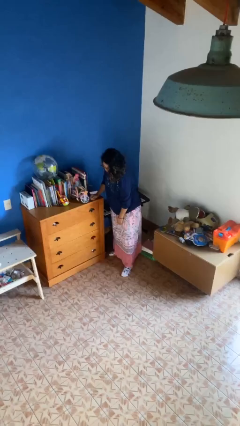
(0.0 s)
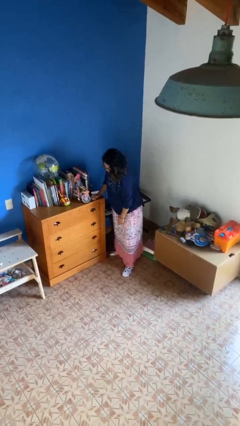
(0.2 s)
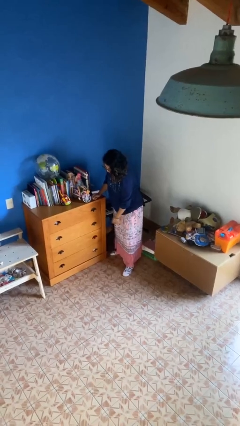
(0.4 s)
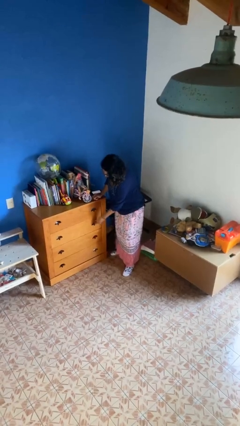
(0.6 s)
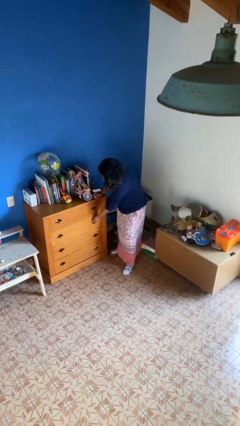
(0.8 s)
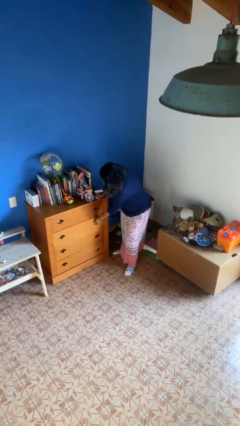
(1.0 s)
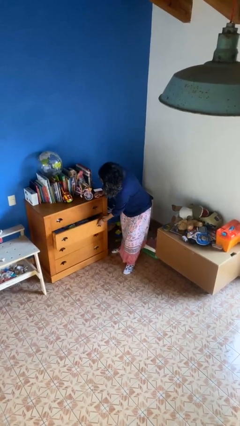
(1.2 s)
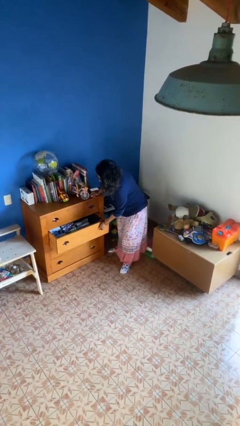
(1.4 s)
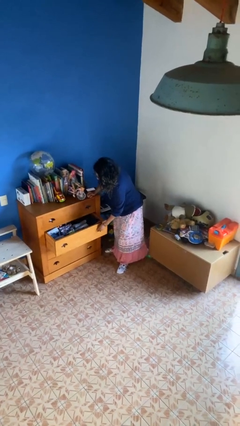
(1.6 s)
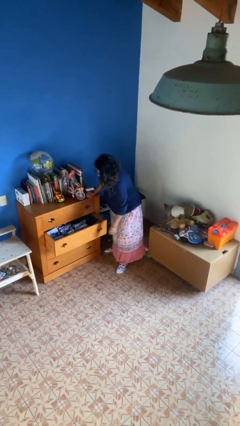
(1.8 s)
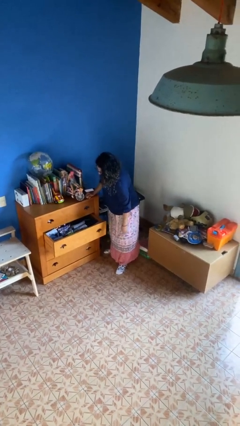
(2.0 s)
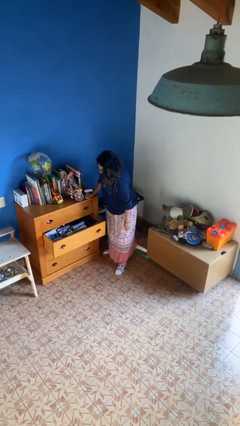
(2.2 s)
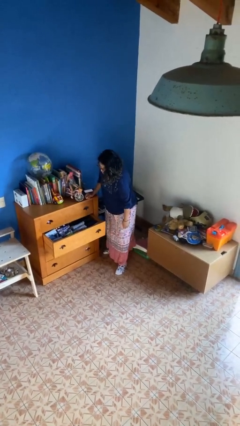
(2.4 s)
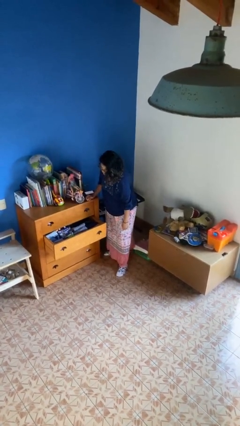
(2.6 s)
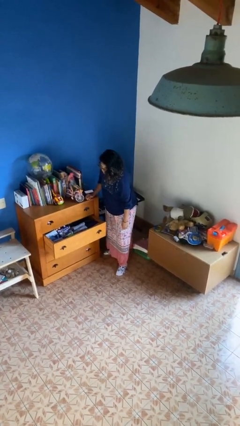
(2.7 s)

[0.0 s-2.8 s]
person opens dresser drawer

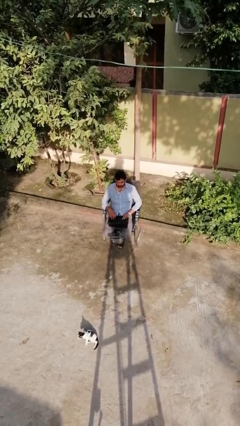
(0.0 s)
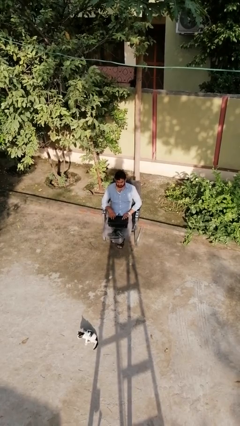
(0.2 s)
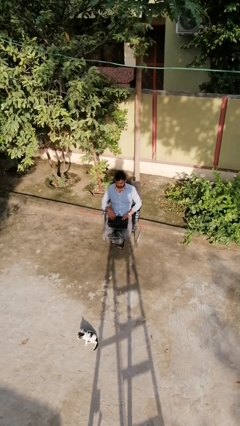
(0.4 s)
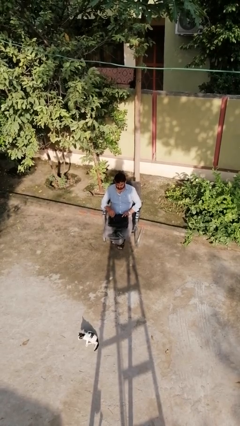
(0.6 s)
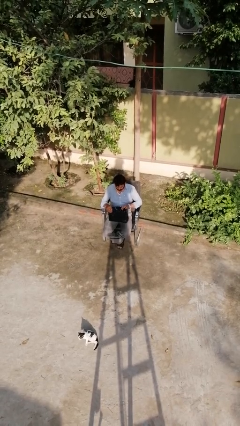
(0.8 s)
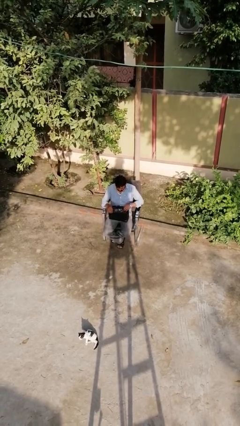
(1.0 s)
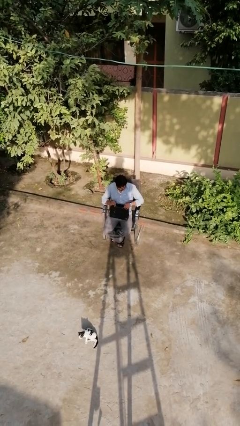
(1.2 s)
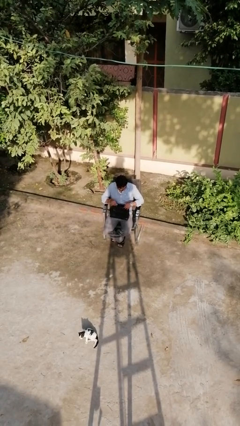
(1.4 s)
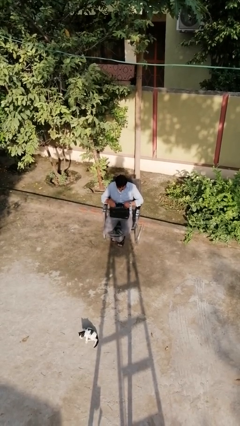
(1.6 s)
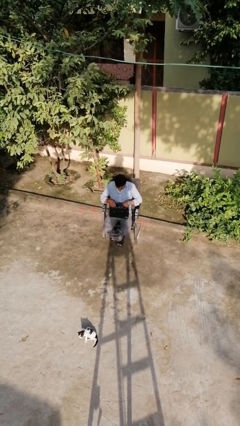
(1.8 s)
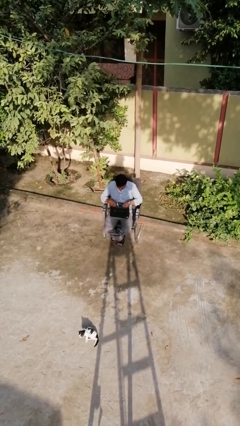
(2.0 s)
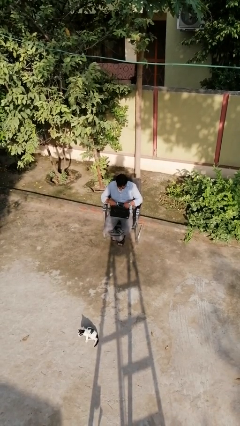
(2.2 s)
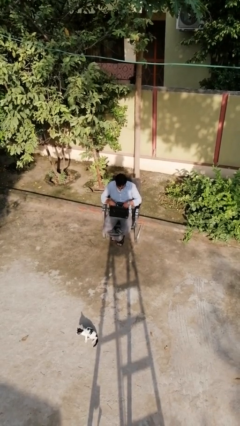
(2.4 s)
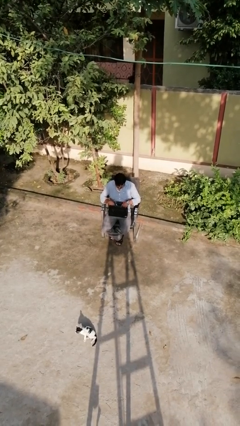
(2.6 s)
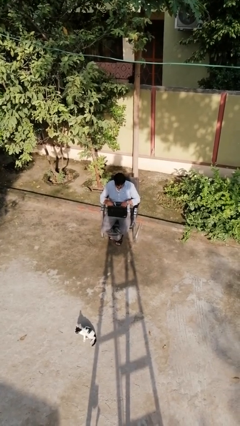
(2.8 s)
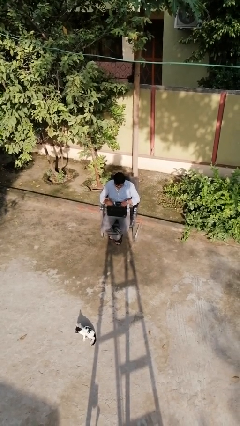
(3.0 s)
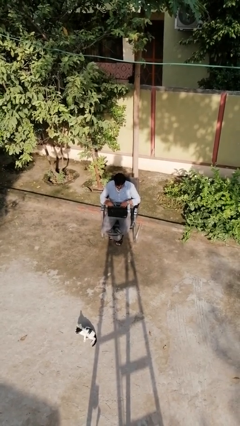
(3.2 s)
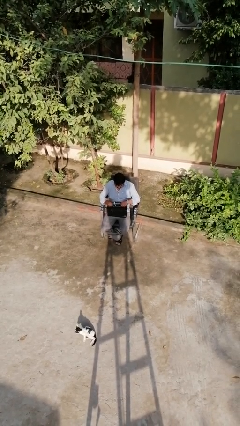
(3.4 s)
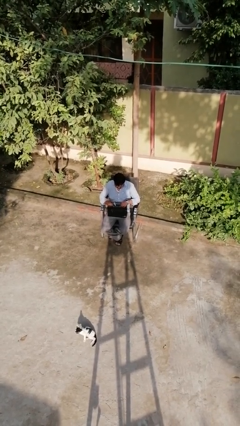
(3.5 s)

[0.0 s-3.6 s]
person searches in backpack

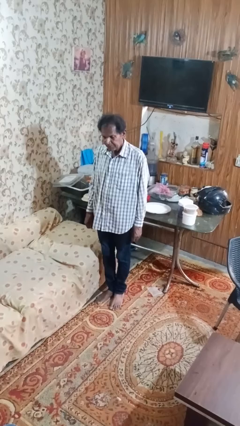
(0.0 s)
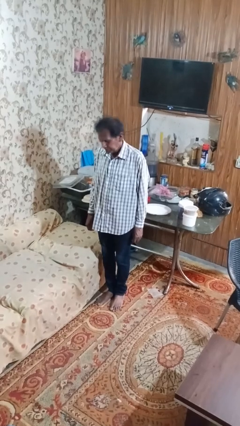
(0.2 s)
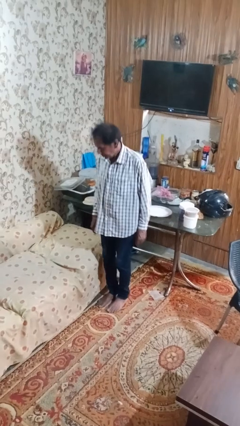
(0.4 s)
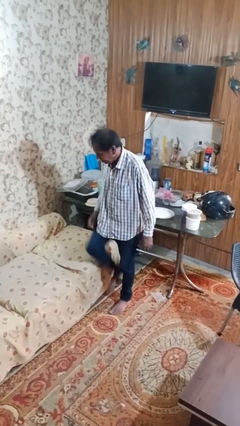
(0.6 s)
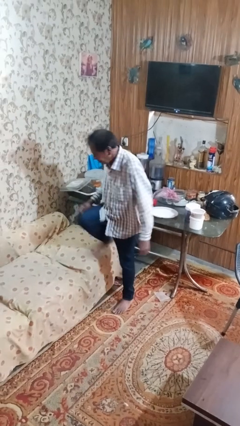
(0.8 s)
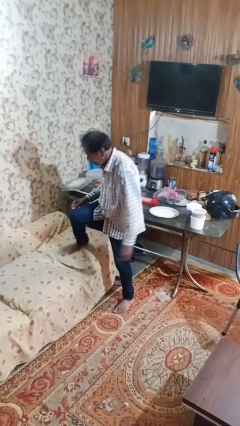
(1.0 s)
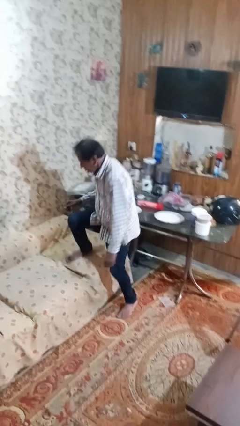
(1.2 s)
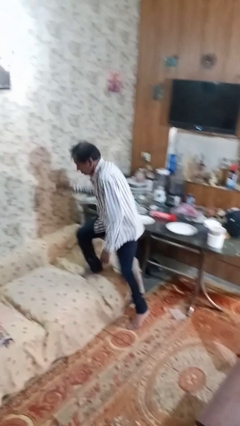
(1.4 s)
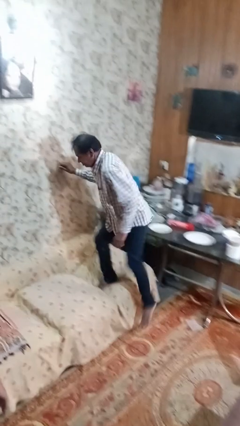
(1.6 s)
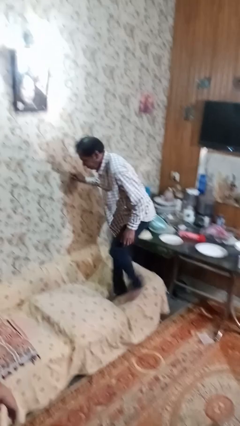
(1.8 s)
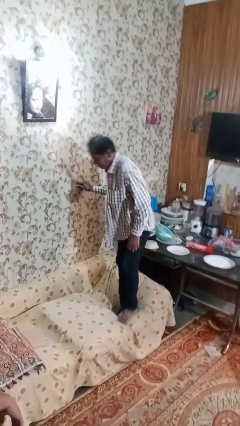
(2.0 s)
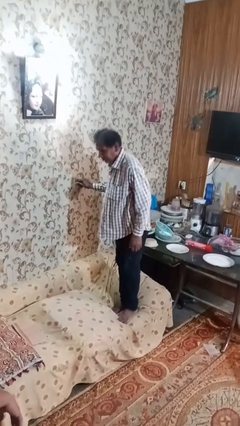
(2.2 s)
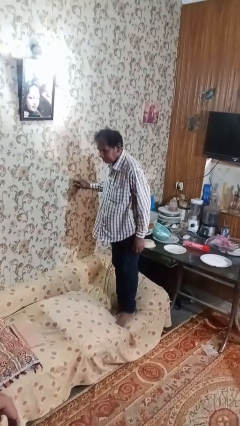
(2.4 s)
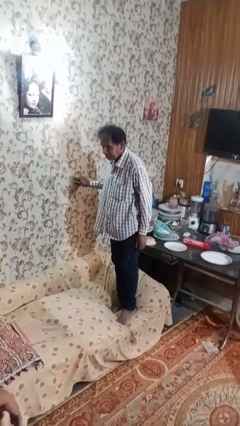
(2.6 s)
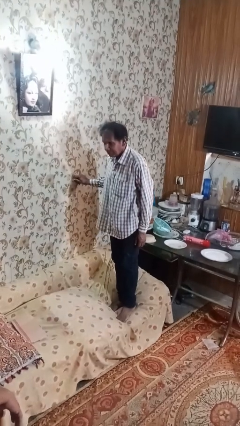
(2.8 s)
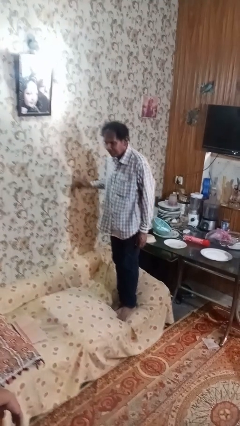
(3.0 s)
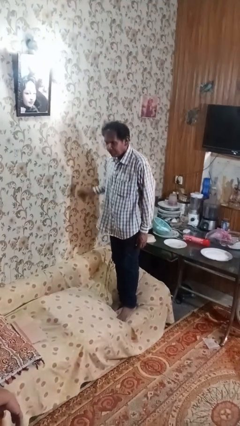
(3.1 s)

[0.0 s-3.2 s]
person climbs on couch

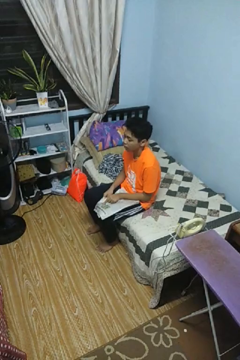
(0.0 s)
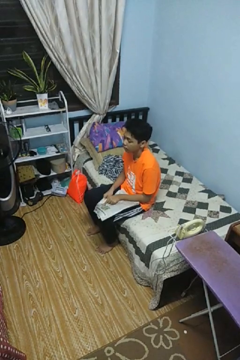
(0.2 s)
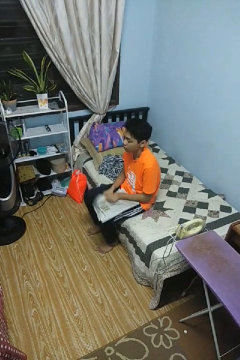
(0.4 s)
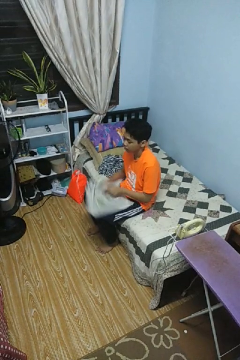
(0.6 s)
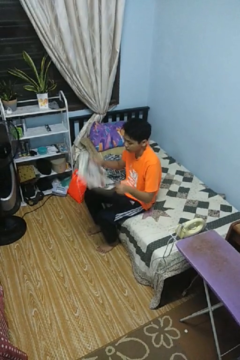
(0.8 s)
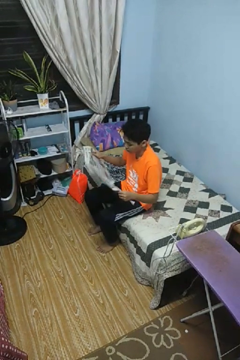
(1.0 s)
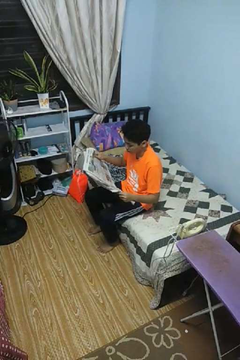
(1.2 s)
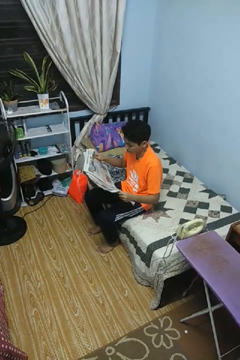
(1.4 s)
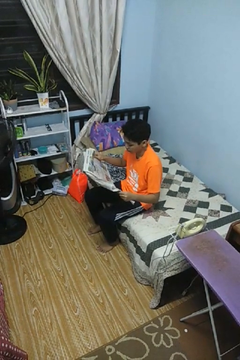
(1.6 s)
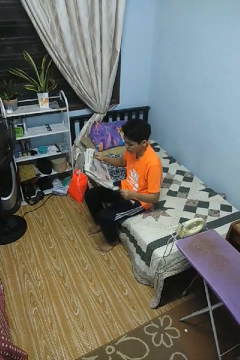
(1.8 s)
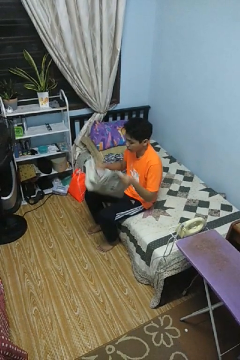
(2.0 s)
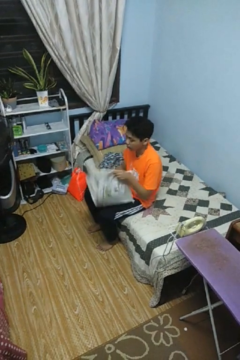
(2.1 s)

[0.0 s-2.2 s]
person reads newspaper

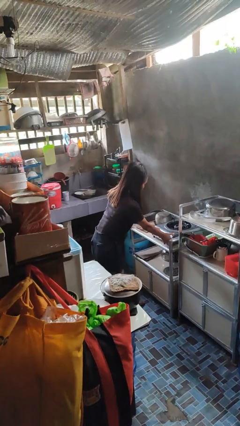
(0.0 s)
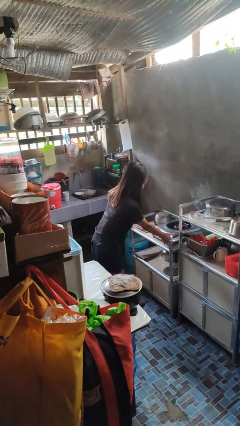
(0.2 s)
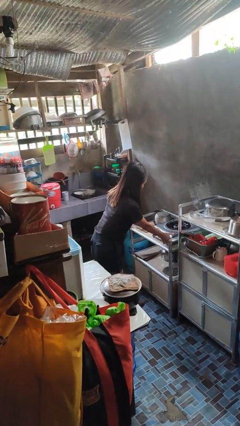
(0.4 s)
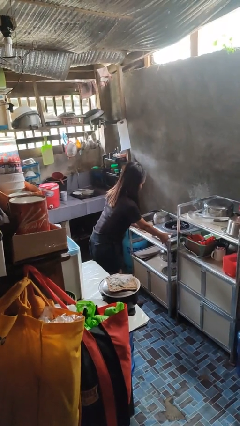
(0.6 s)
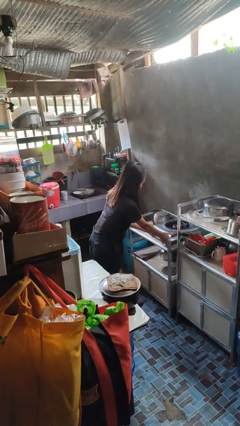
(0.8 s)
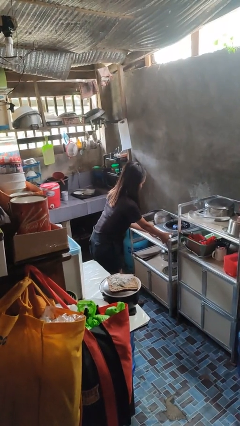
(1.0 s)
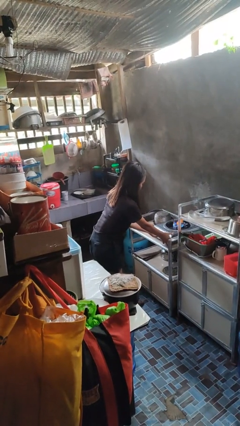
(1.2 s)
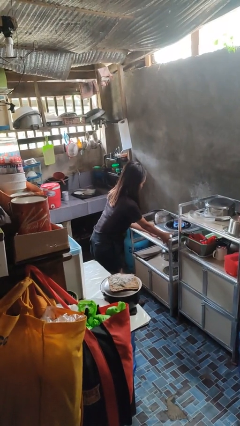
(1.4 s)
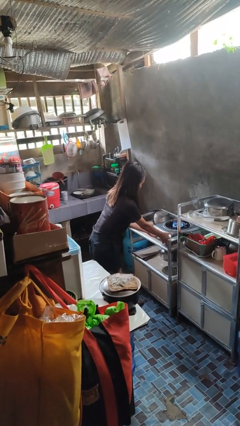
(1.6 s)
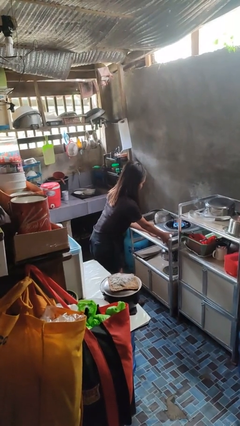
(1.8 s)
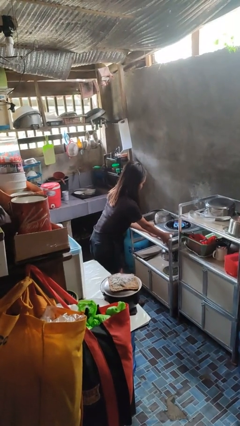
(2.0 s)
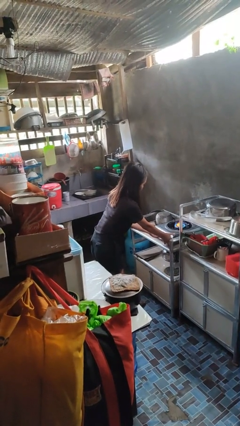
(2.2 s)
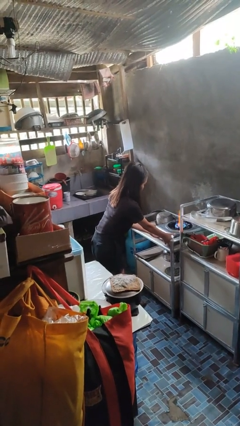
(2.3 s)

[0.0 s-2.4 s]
person turns on stovetop

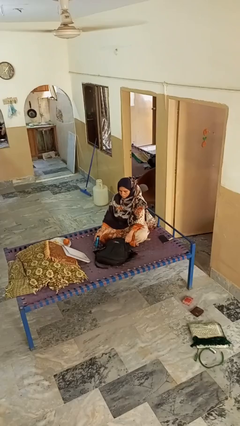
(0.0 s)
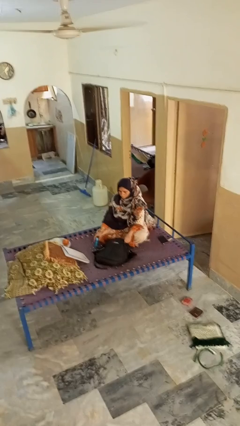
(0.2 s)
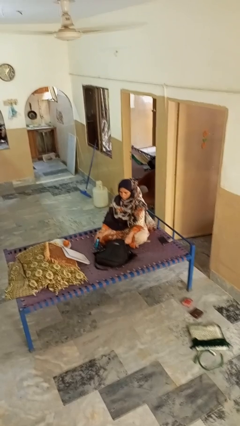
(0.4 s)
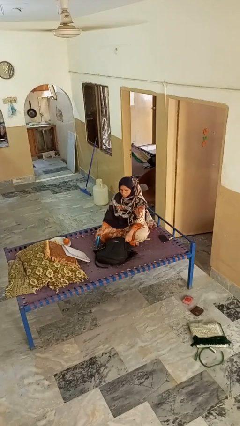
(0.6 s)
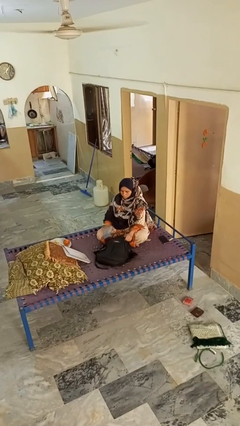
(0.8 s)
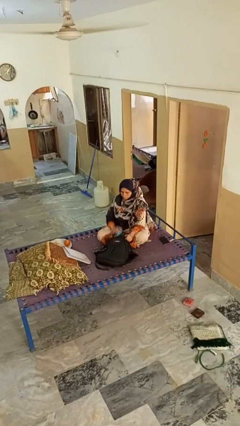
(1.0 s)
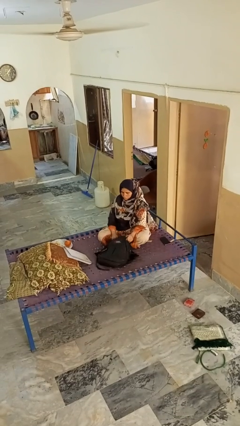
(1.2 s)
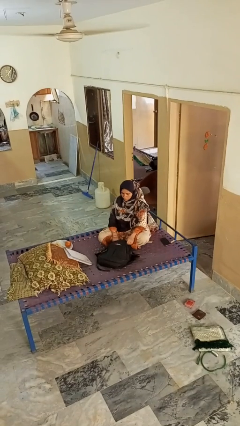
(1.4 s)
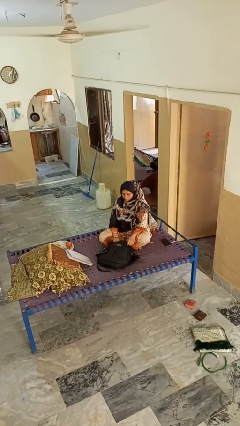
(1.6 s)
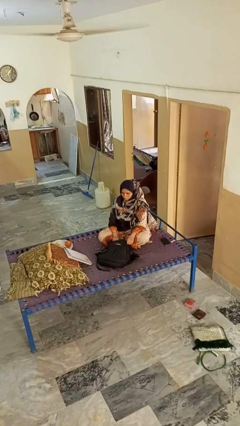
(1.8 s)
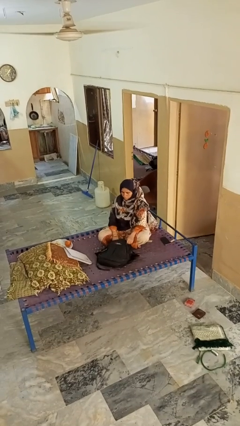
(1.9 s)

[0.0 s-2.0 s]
person puts object into bag

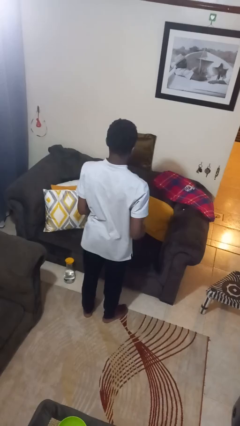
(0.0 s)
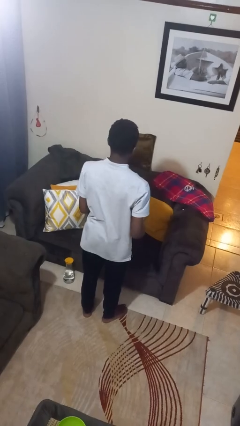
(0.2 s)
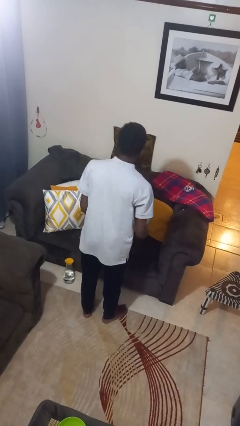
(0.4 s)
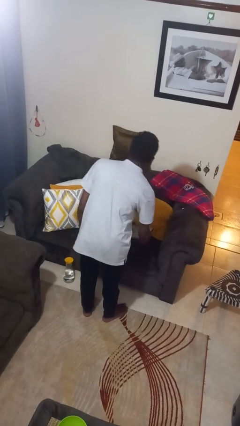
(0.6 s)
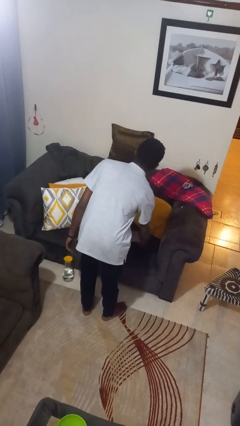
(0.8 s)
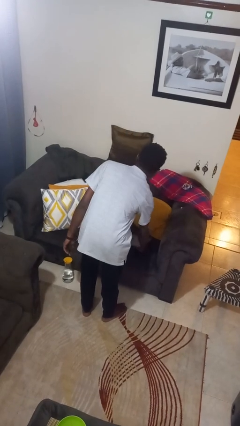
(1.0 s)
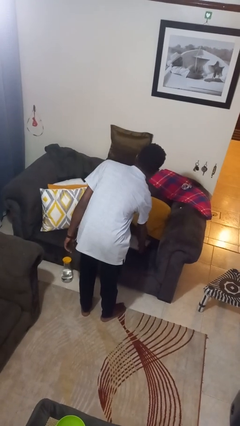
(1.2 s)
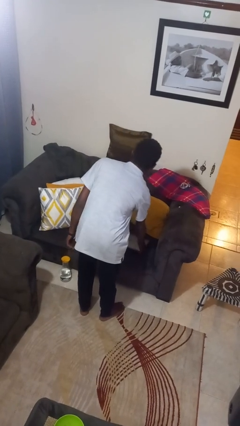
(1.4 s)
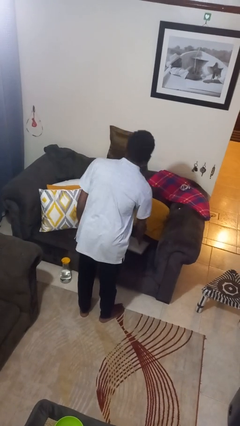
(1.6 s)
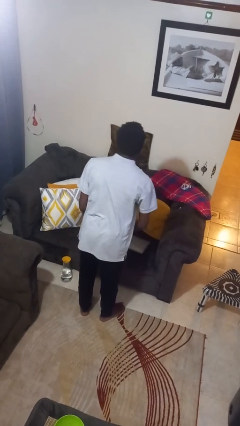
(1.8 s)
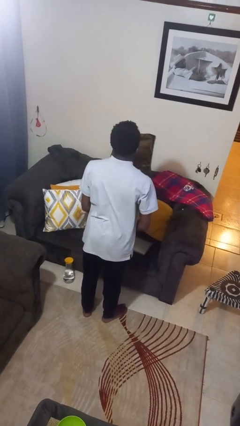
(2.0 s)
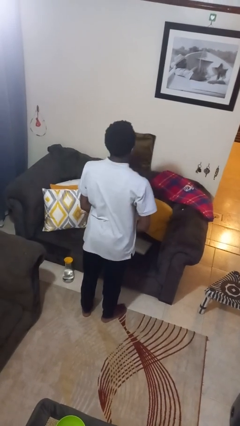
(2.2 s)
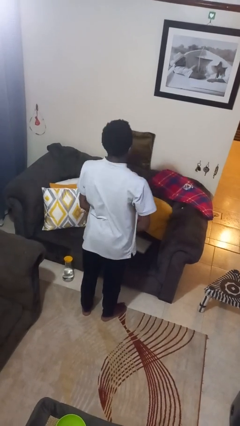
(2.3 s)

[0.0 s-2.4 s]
person puts down object on couch
